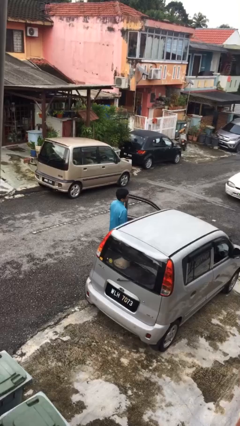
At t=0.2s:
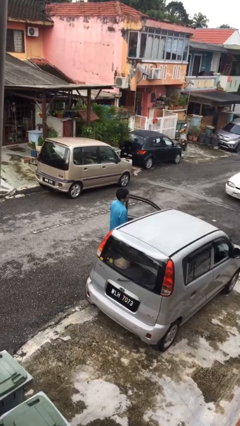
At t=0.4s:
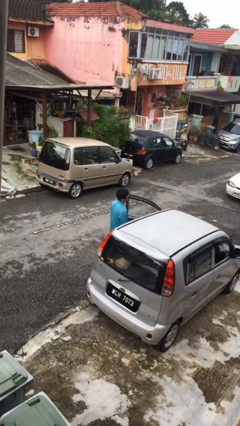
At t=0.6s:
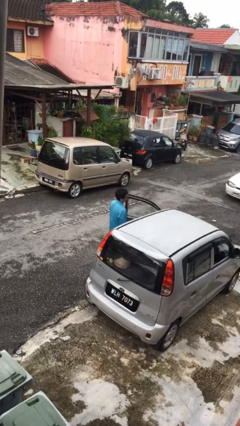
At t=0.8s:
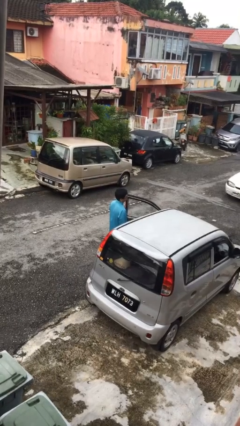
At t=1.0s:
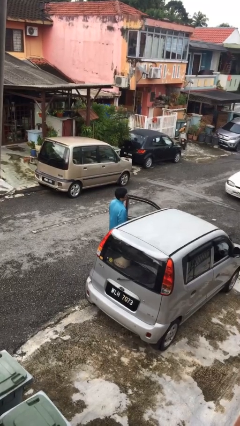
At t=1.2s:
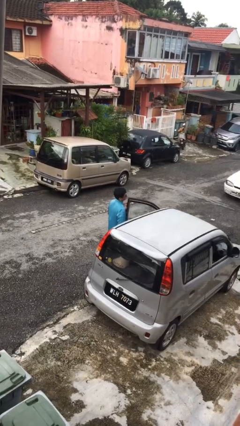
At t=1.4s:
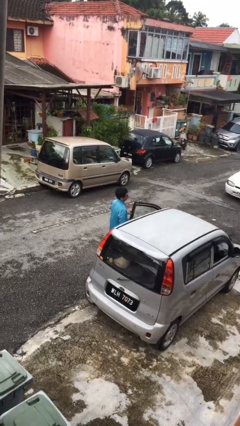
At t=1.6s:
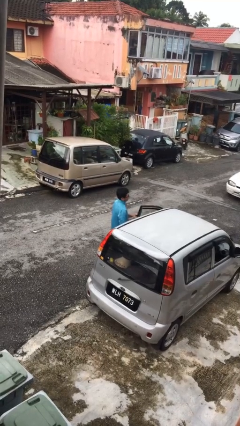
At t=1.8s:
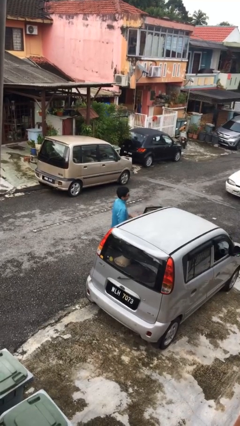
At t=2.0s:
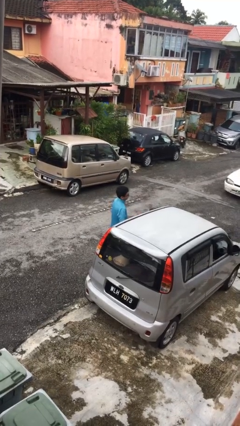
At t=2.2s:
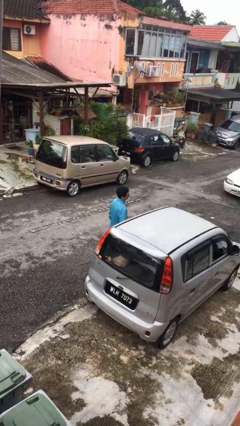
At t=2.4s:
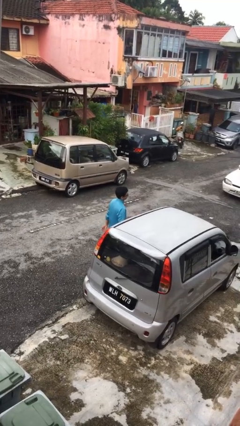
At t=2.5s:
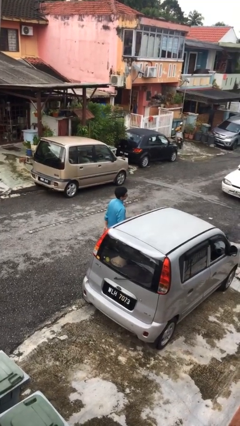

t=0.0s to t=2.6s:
person closes car door

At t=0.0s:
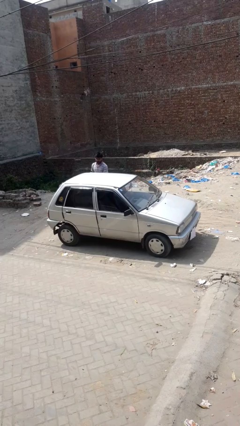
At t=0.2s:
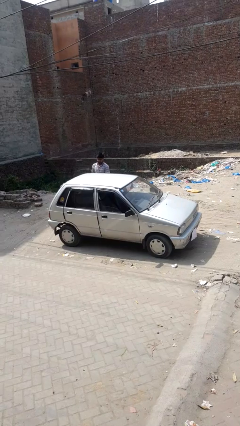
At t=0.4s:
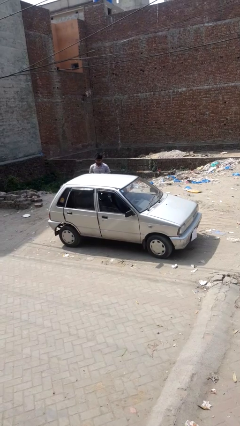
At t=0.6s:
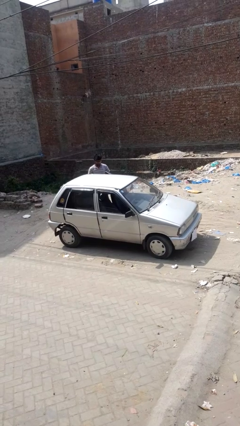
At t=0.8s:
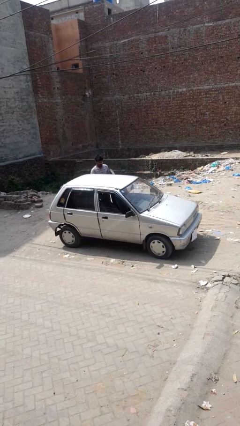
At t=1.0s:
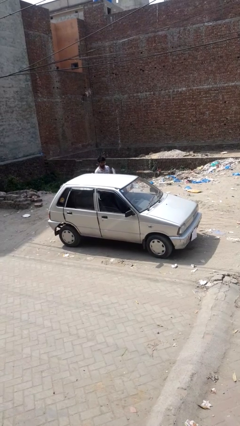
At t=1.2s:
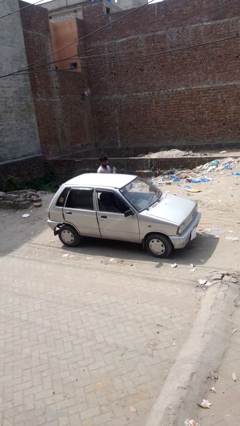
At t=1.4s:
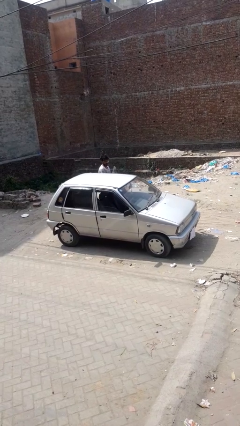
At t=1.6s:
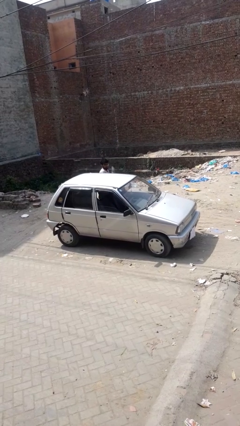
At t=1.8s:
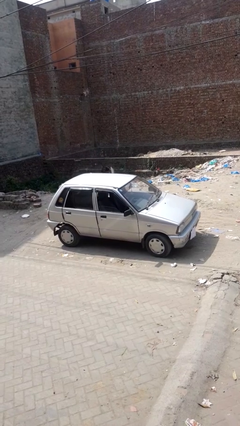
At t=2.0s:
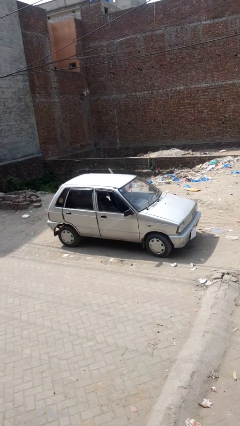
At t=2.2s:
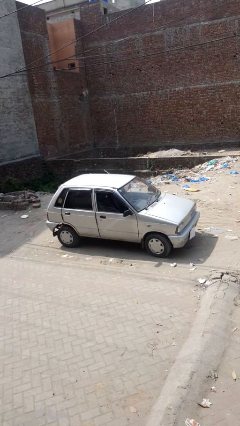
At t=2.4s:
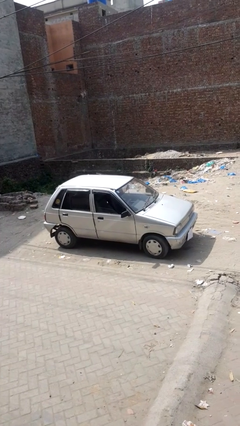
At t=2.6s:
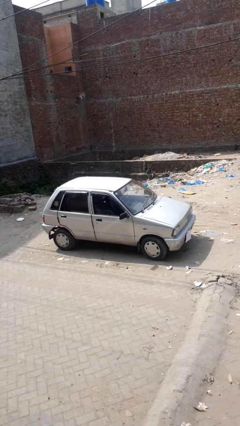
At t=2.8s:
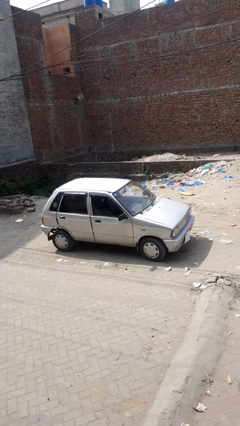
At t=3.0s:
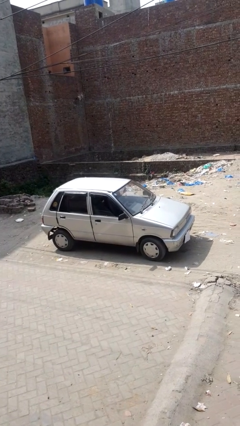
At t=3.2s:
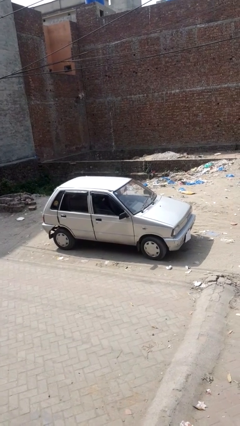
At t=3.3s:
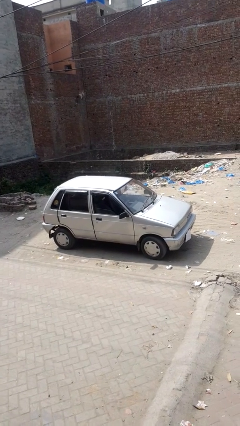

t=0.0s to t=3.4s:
car picks up person

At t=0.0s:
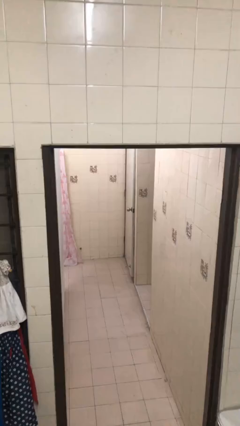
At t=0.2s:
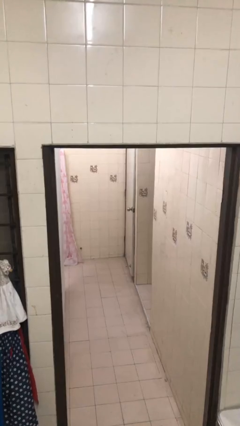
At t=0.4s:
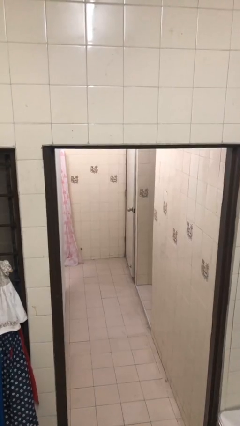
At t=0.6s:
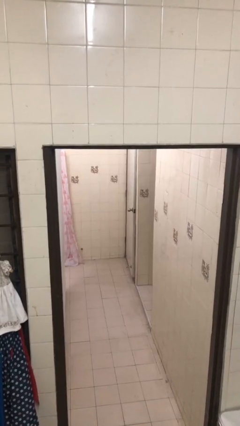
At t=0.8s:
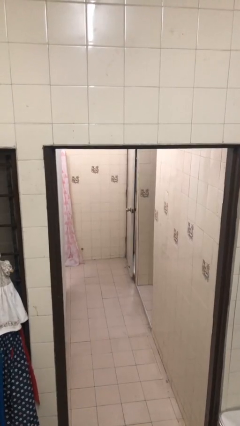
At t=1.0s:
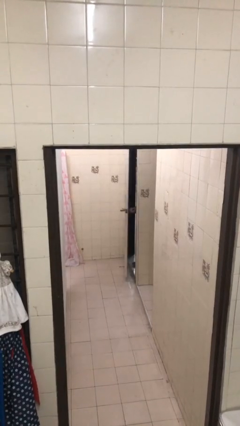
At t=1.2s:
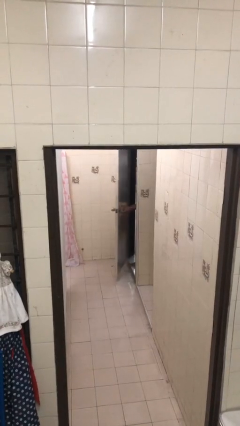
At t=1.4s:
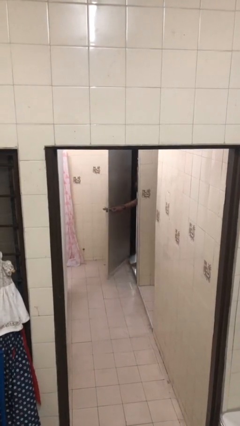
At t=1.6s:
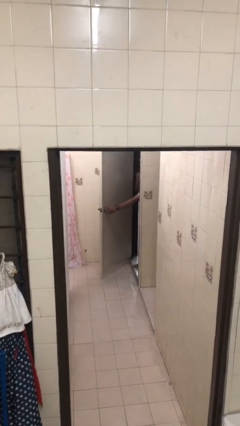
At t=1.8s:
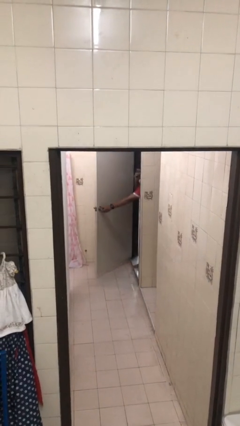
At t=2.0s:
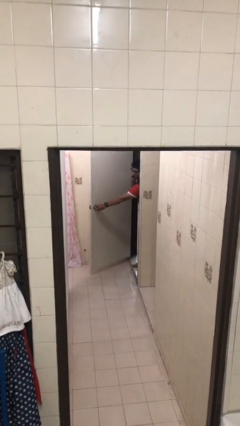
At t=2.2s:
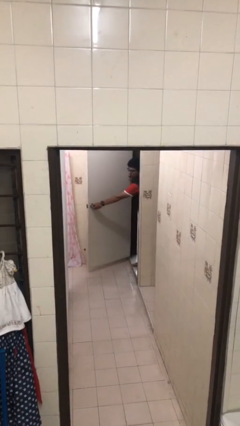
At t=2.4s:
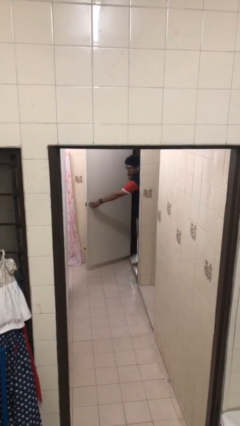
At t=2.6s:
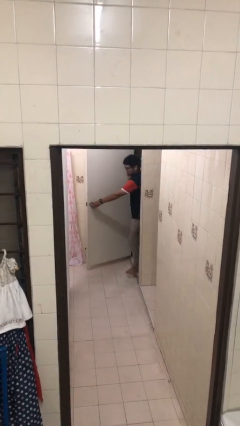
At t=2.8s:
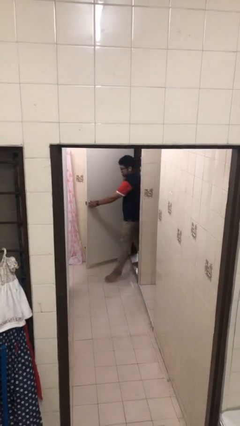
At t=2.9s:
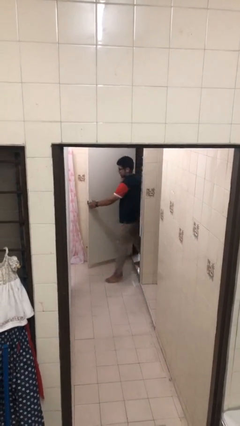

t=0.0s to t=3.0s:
person opens facility door

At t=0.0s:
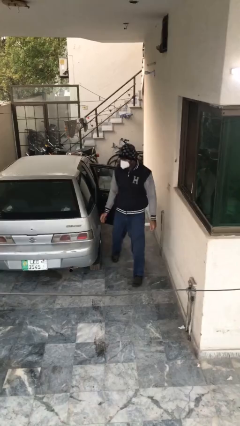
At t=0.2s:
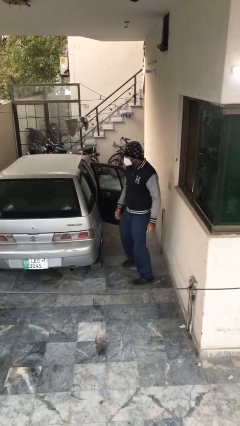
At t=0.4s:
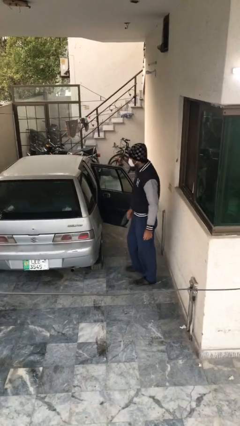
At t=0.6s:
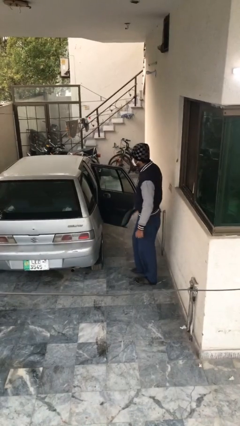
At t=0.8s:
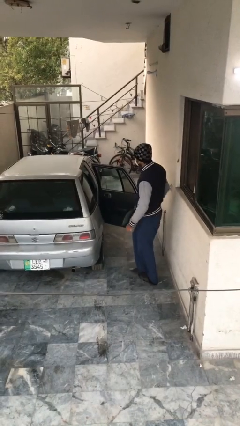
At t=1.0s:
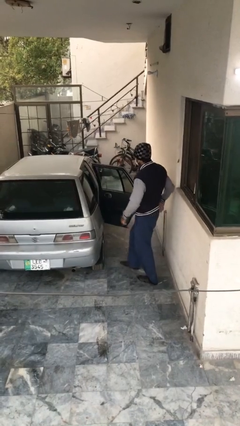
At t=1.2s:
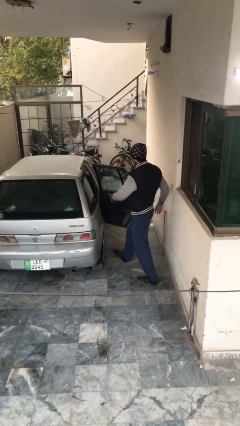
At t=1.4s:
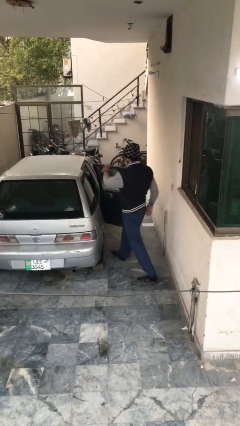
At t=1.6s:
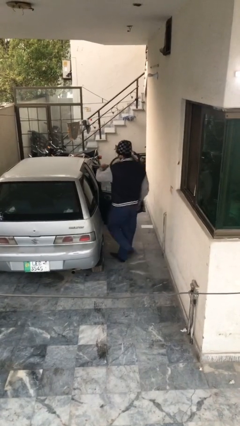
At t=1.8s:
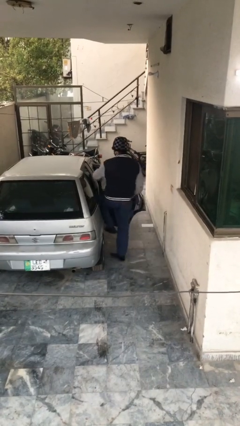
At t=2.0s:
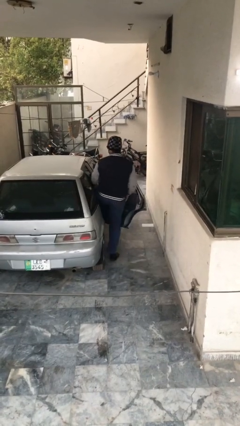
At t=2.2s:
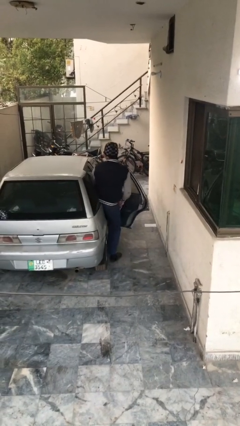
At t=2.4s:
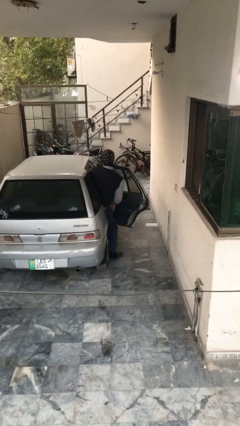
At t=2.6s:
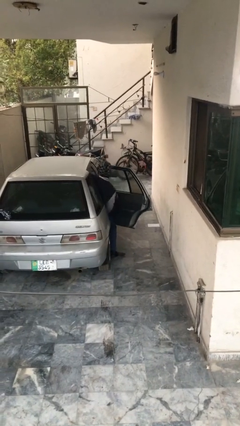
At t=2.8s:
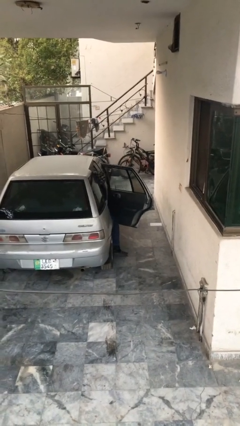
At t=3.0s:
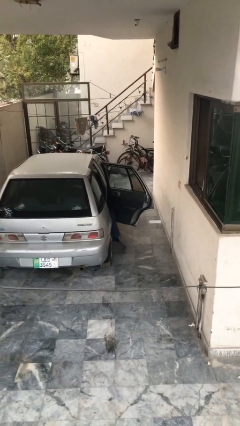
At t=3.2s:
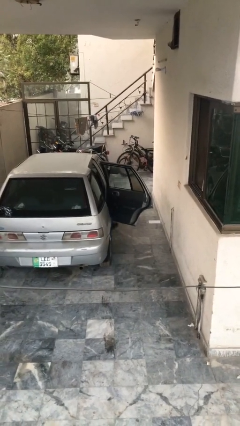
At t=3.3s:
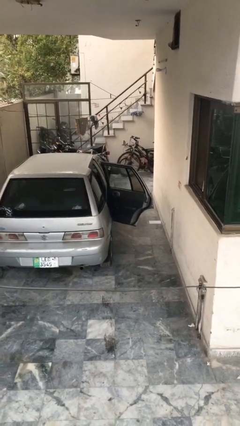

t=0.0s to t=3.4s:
person enters car

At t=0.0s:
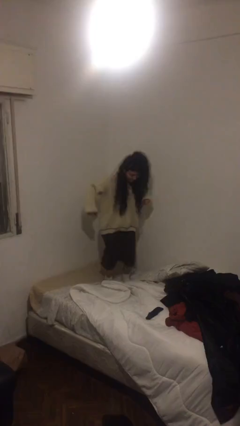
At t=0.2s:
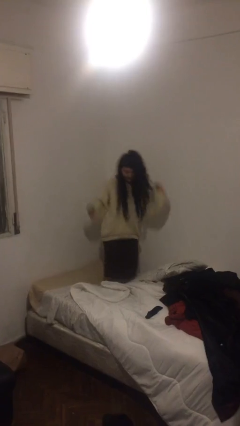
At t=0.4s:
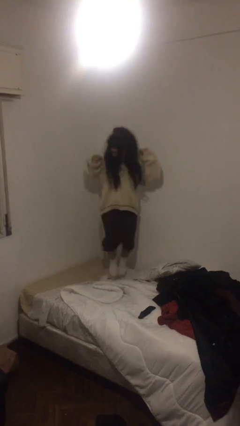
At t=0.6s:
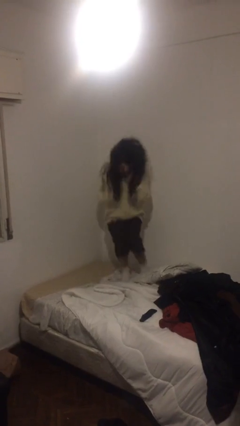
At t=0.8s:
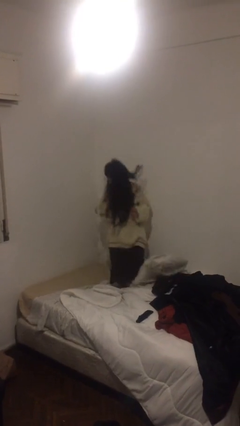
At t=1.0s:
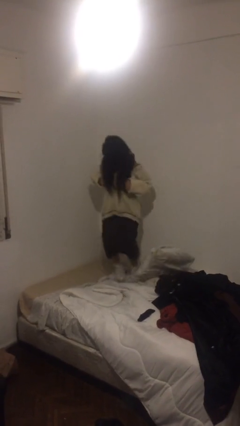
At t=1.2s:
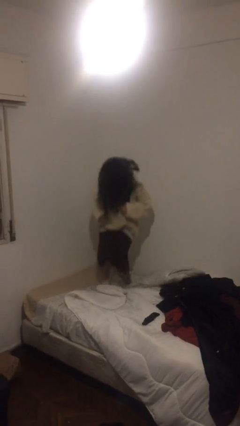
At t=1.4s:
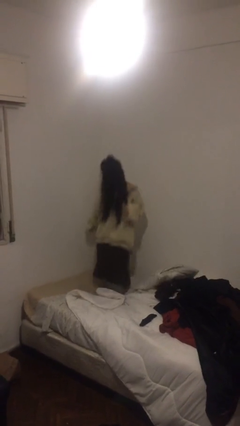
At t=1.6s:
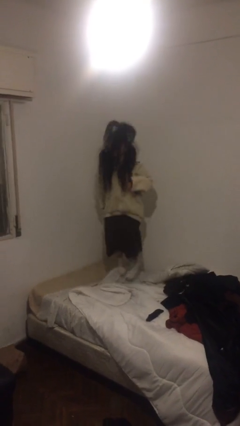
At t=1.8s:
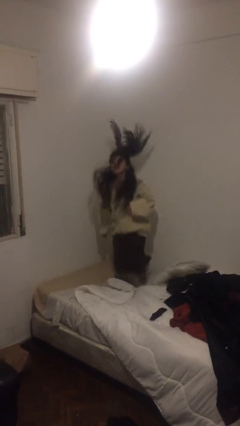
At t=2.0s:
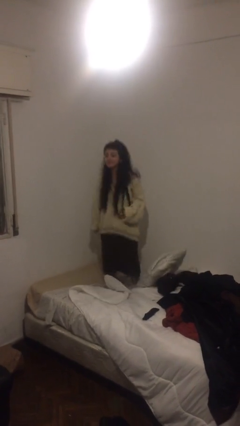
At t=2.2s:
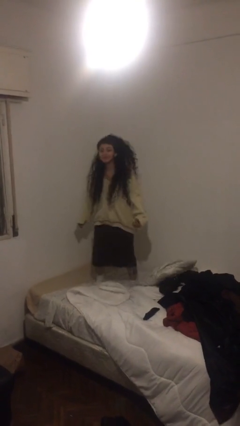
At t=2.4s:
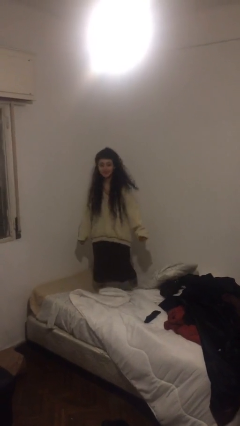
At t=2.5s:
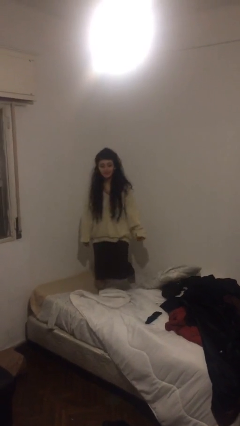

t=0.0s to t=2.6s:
person jumps on bed

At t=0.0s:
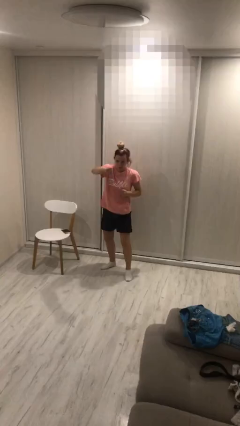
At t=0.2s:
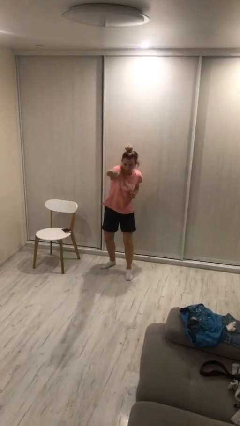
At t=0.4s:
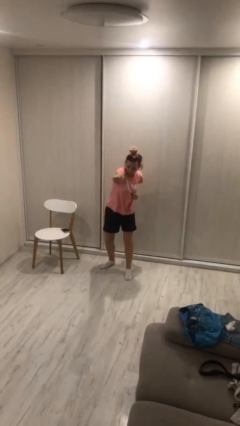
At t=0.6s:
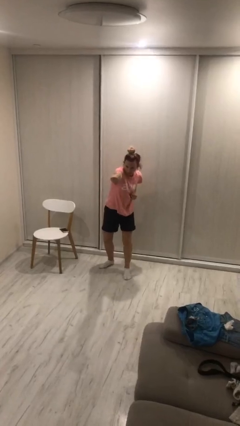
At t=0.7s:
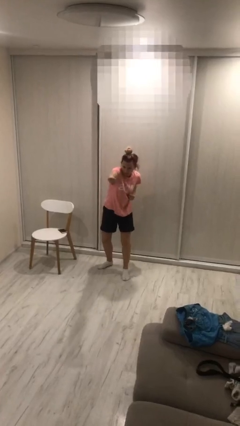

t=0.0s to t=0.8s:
person karate chop

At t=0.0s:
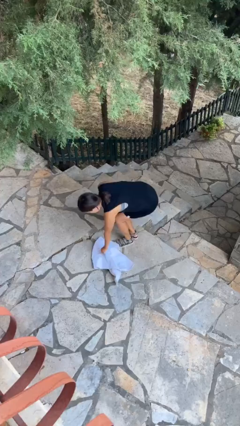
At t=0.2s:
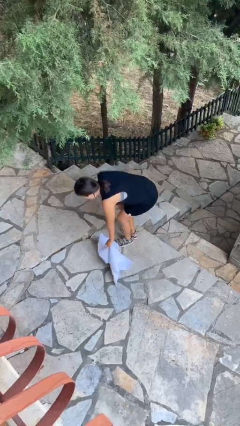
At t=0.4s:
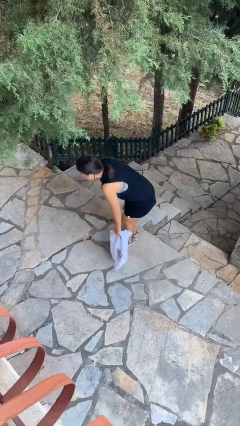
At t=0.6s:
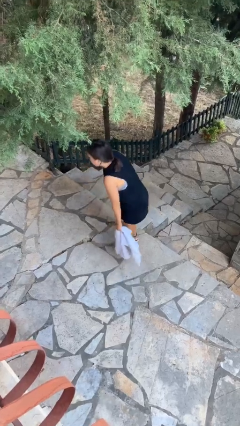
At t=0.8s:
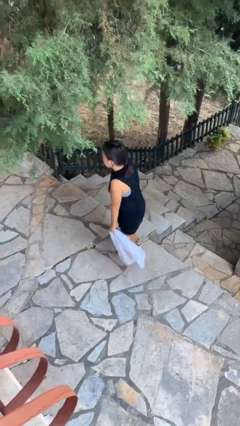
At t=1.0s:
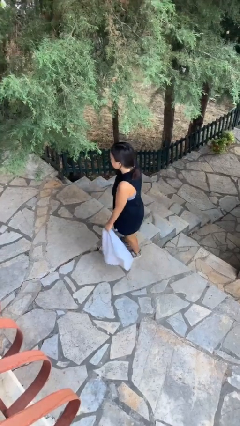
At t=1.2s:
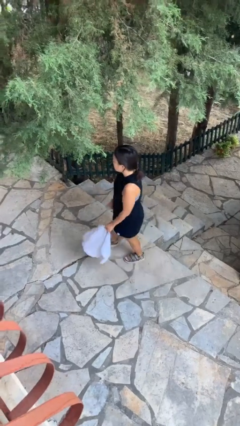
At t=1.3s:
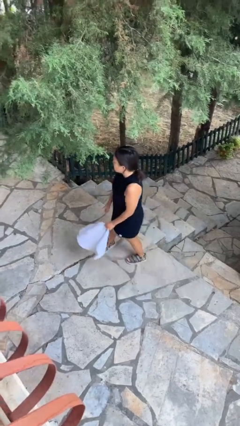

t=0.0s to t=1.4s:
person picks up object from floor
